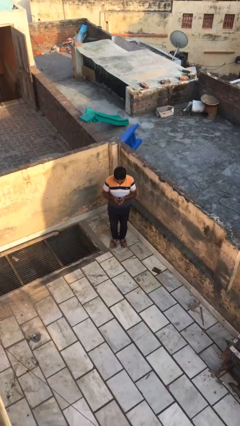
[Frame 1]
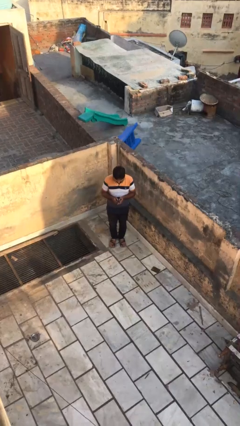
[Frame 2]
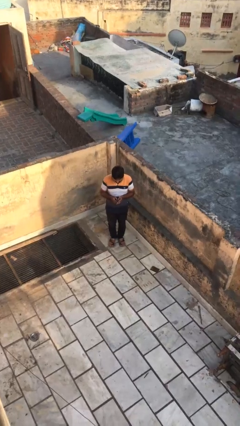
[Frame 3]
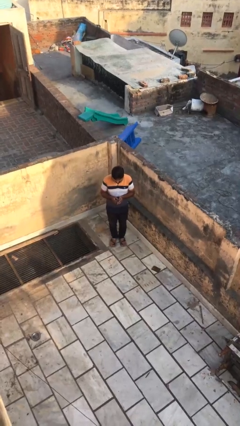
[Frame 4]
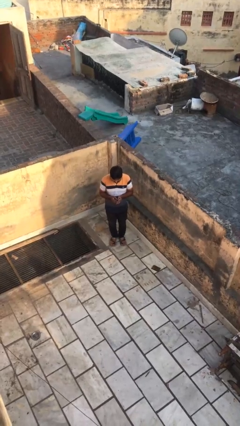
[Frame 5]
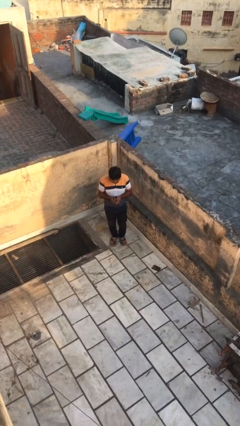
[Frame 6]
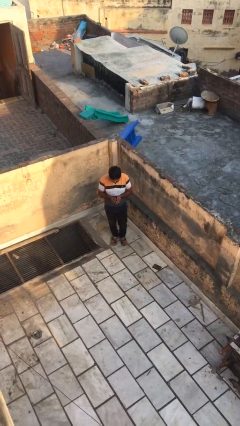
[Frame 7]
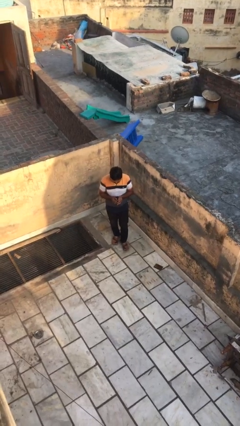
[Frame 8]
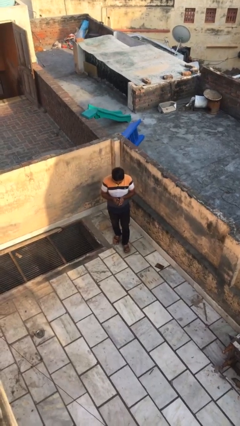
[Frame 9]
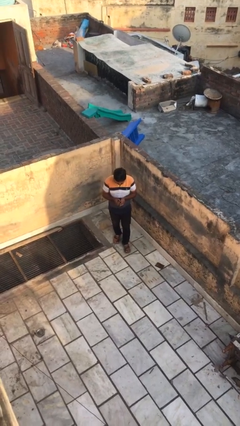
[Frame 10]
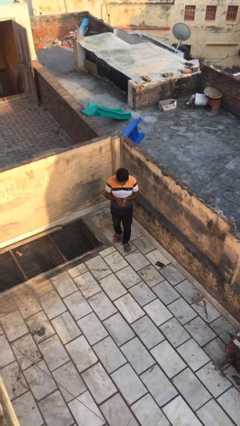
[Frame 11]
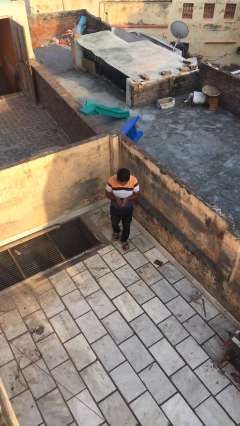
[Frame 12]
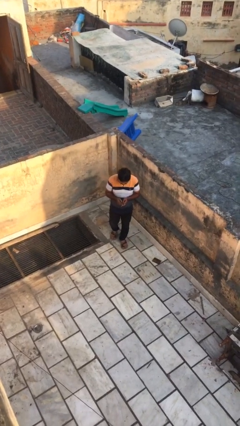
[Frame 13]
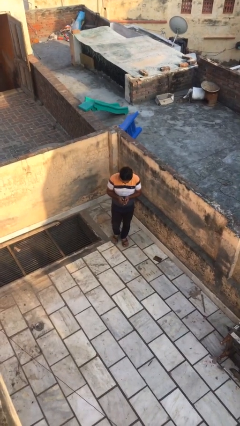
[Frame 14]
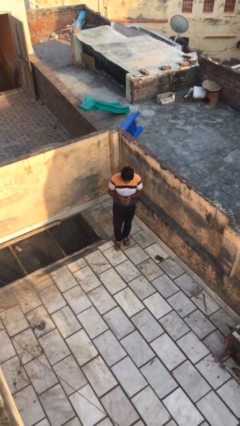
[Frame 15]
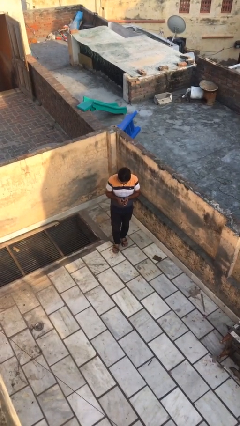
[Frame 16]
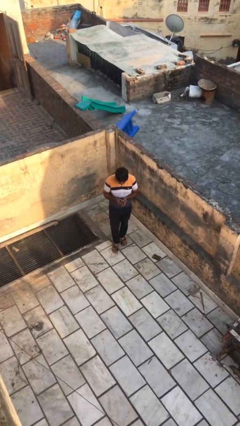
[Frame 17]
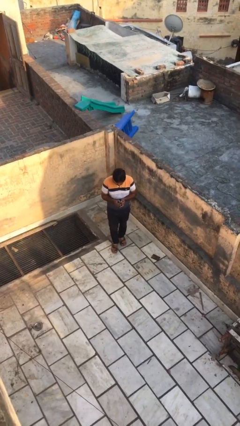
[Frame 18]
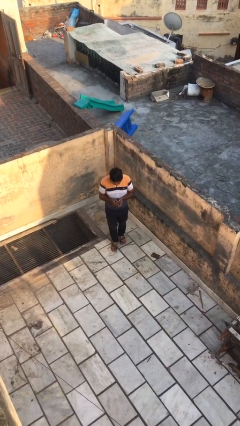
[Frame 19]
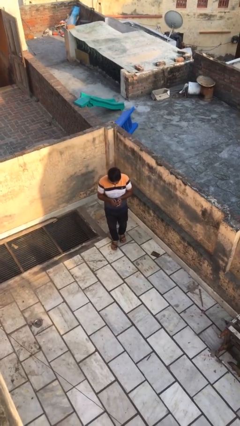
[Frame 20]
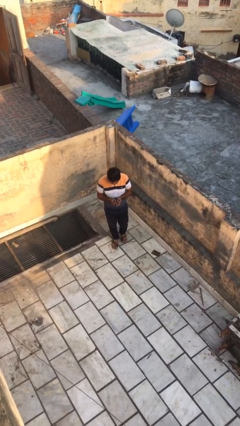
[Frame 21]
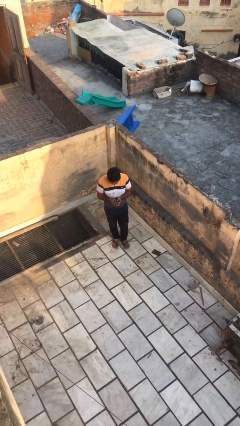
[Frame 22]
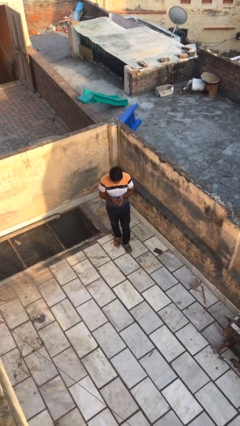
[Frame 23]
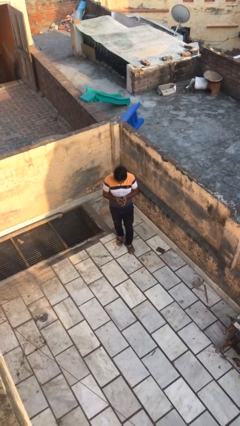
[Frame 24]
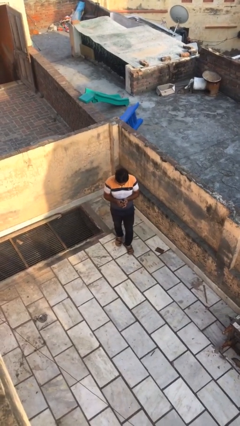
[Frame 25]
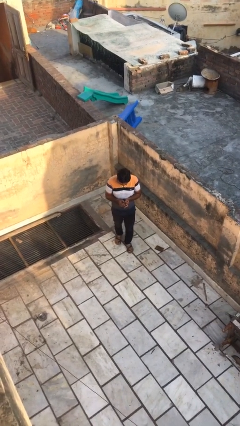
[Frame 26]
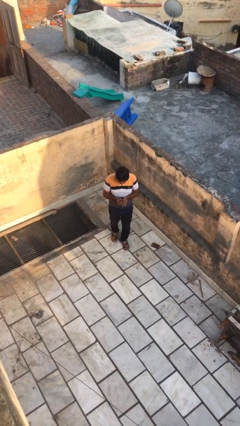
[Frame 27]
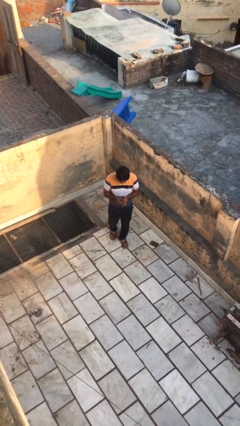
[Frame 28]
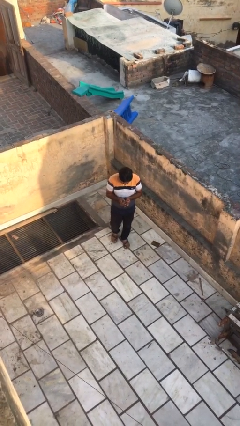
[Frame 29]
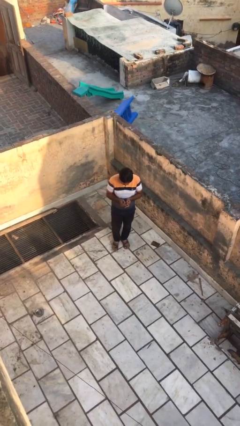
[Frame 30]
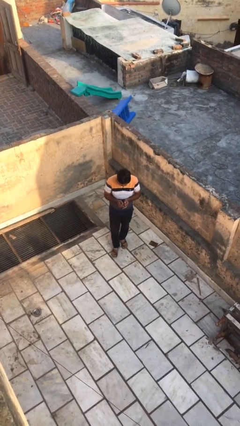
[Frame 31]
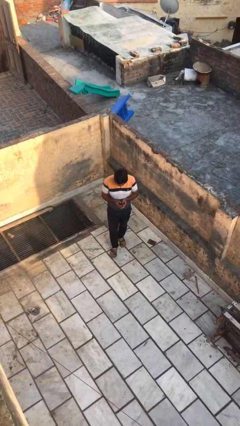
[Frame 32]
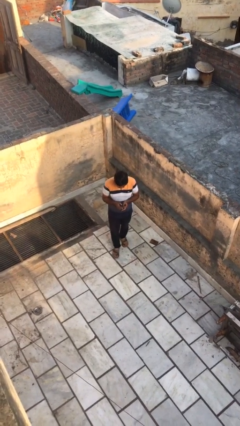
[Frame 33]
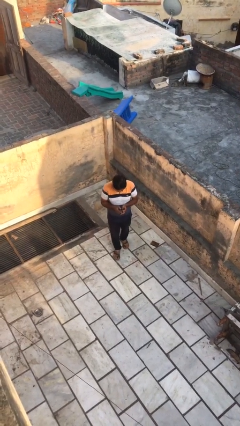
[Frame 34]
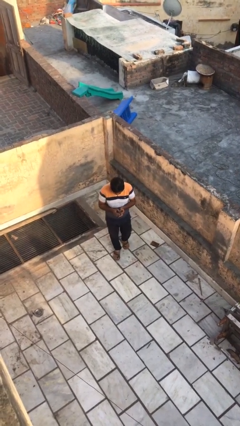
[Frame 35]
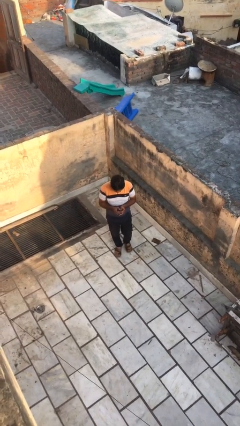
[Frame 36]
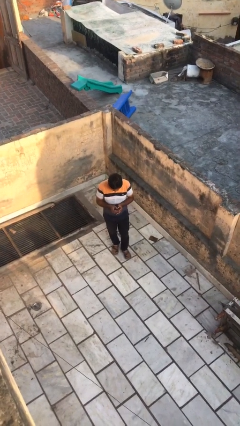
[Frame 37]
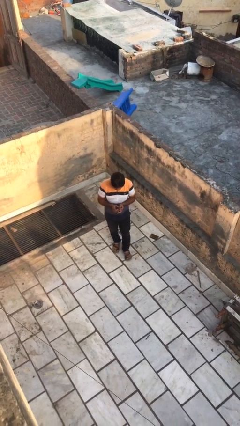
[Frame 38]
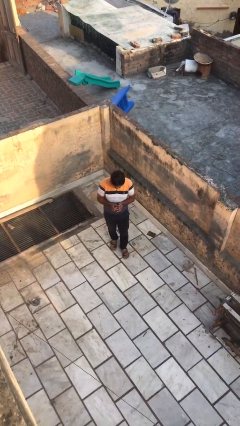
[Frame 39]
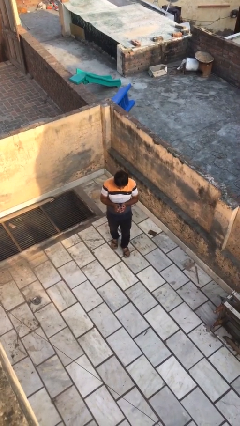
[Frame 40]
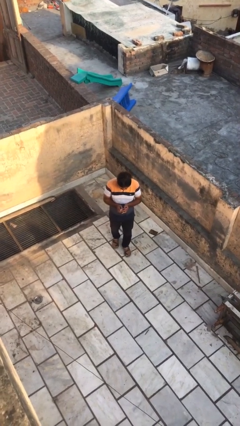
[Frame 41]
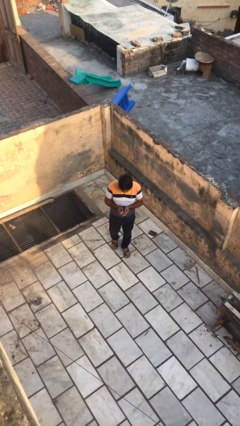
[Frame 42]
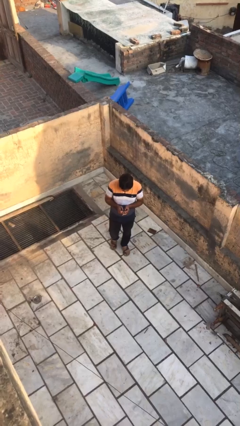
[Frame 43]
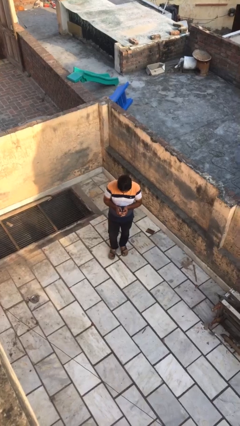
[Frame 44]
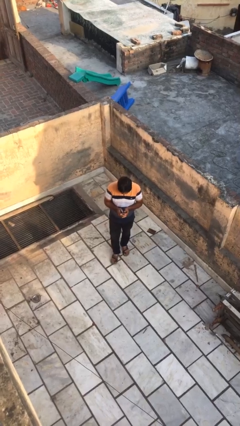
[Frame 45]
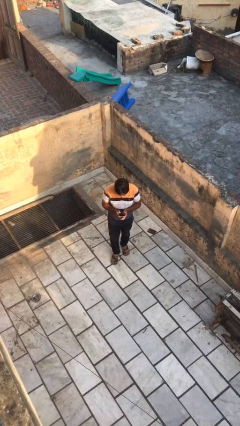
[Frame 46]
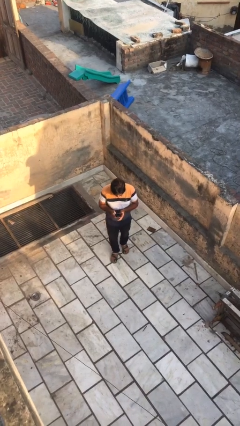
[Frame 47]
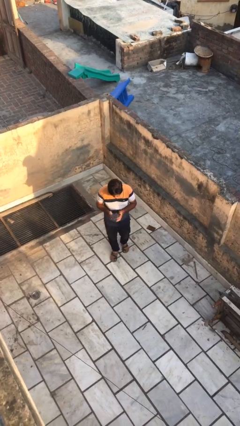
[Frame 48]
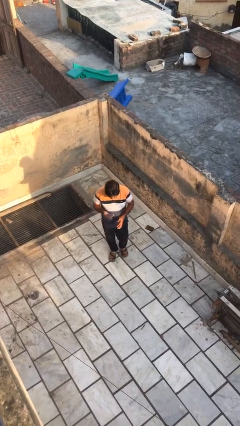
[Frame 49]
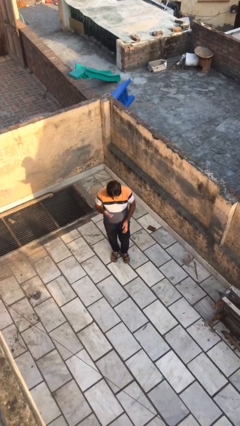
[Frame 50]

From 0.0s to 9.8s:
person texts on phone

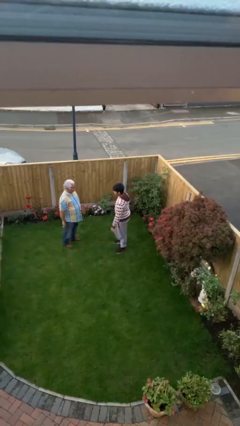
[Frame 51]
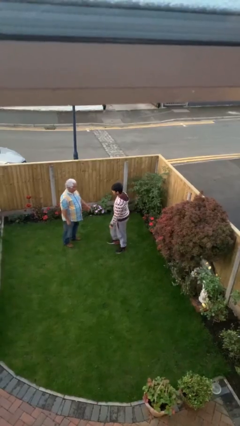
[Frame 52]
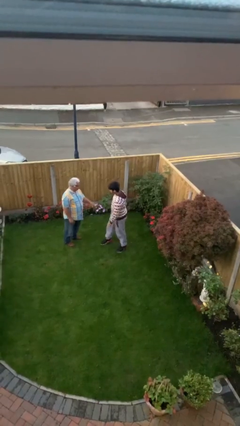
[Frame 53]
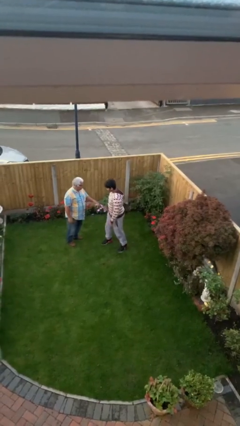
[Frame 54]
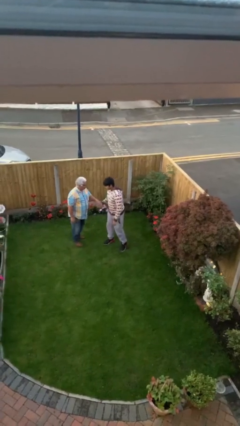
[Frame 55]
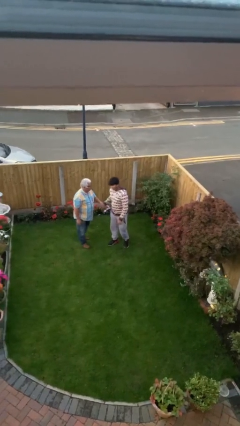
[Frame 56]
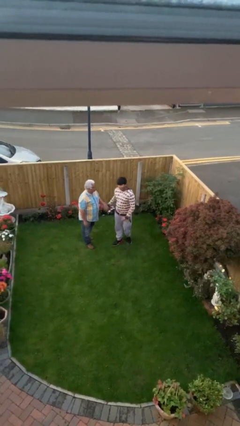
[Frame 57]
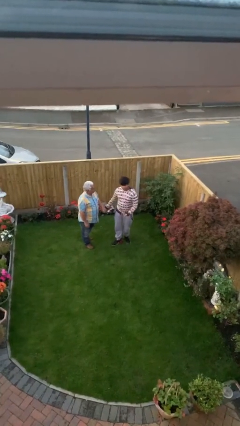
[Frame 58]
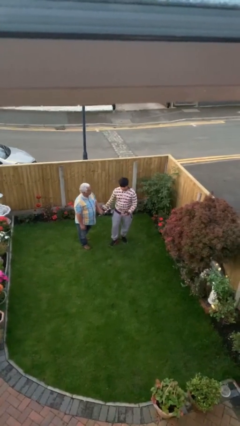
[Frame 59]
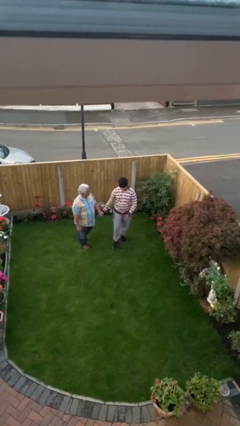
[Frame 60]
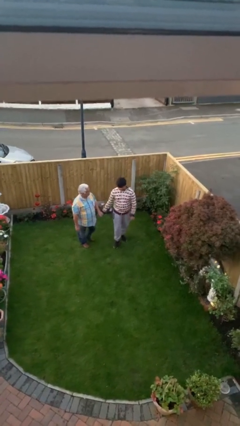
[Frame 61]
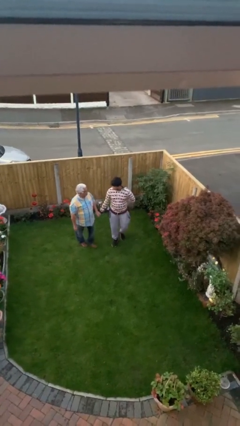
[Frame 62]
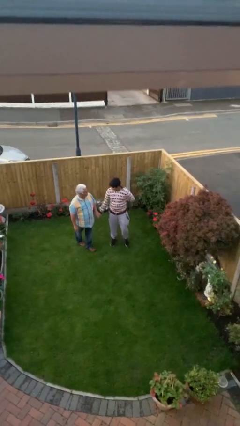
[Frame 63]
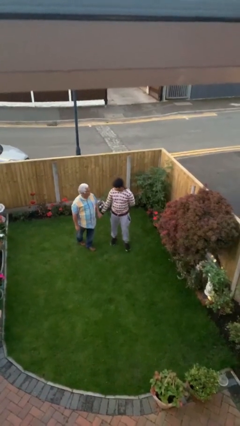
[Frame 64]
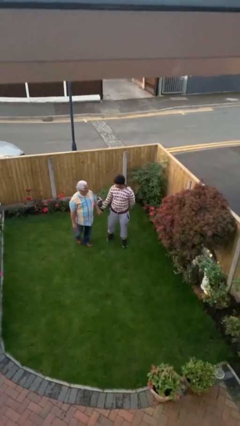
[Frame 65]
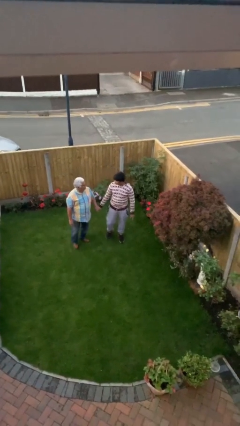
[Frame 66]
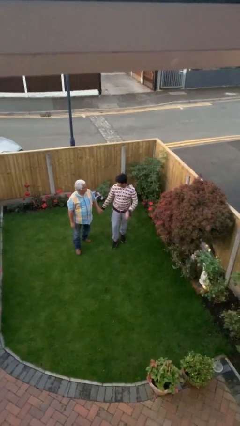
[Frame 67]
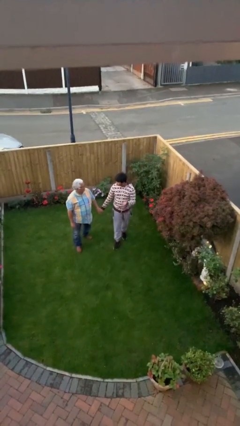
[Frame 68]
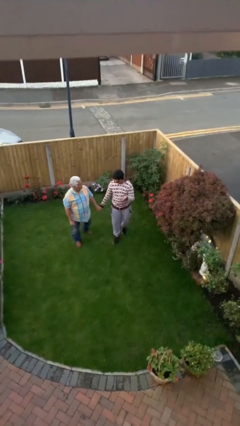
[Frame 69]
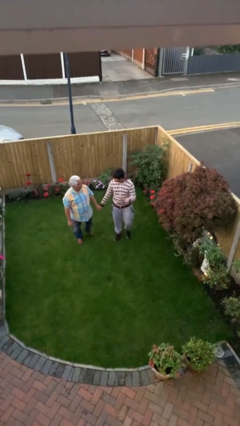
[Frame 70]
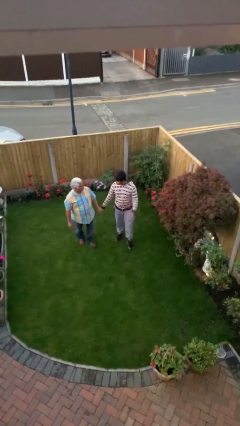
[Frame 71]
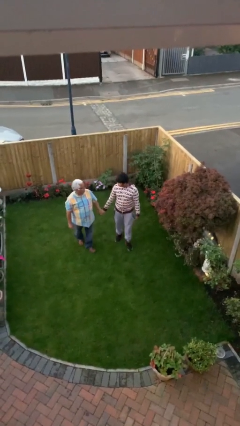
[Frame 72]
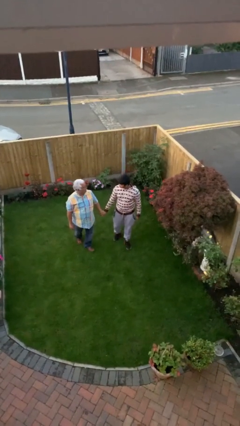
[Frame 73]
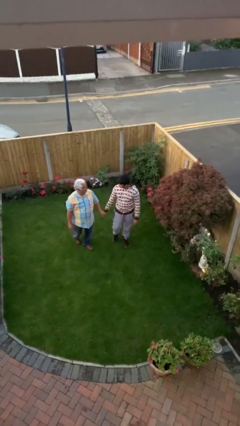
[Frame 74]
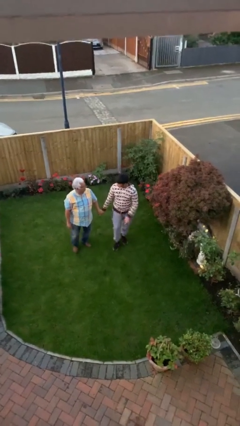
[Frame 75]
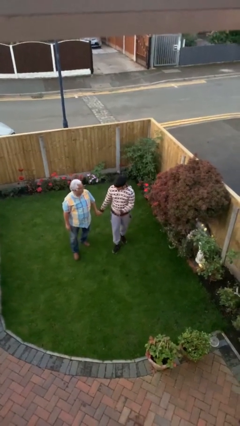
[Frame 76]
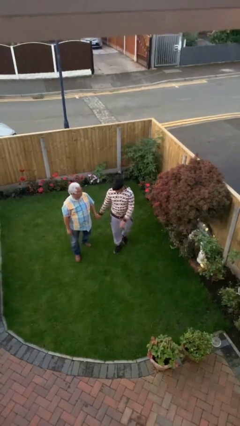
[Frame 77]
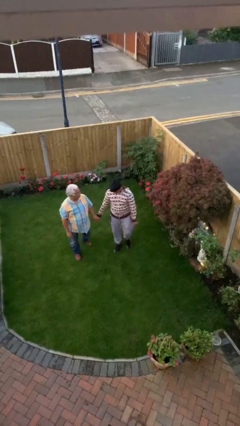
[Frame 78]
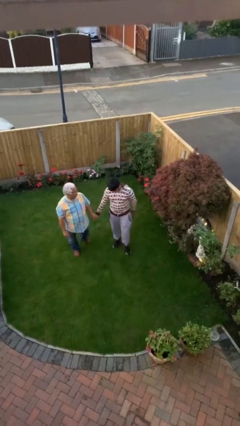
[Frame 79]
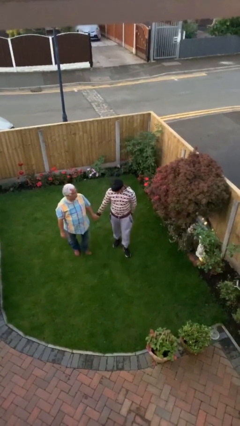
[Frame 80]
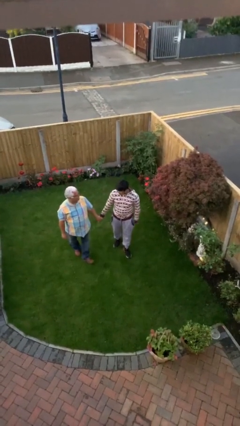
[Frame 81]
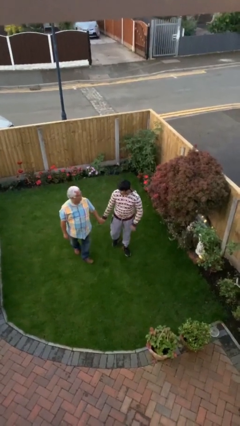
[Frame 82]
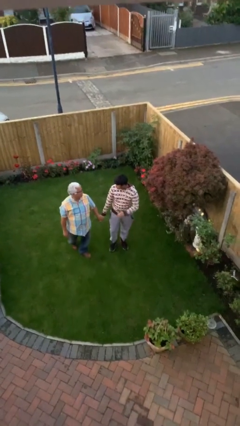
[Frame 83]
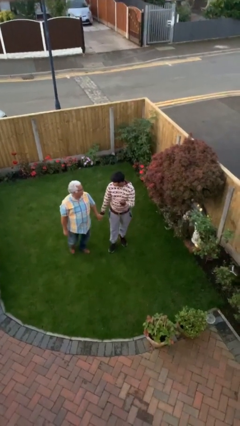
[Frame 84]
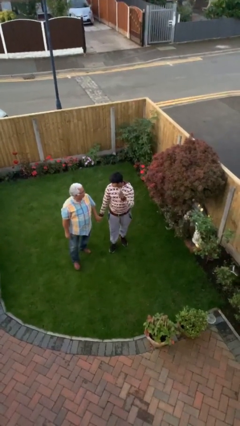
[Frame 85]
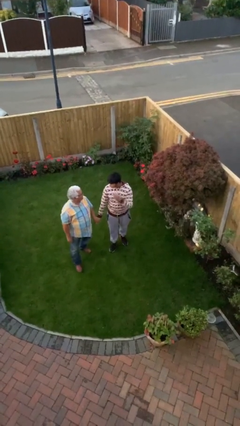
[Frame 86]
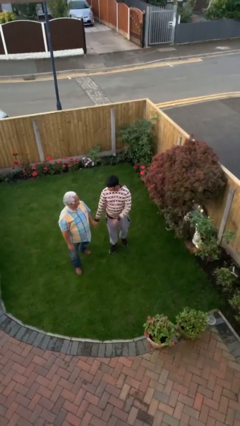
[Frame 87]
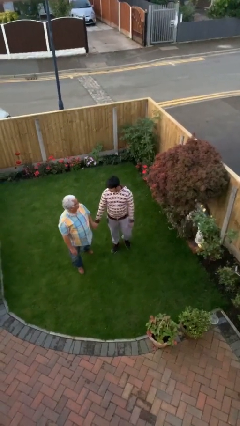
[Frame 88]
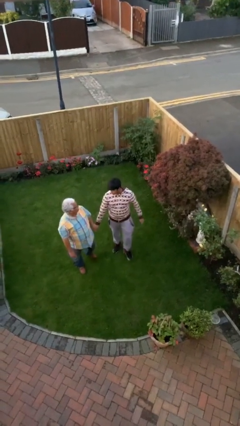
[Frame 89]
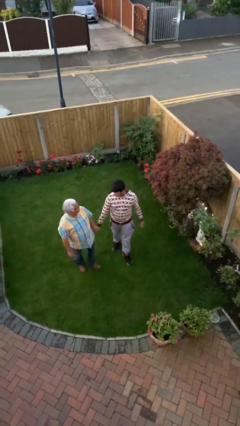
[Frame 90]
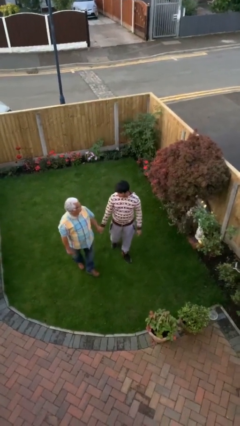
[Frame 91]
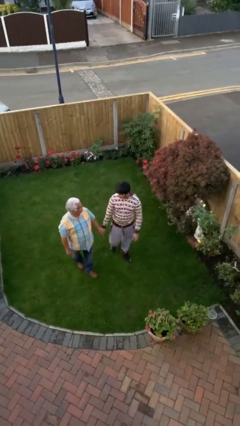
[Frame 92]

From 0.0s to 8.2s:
person holds hand

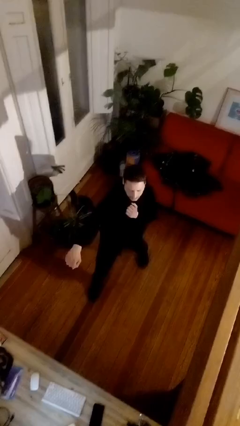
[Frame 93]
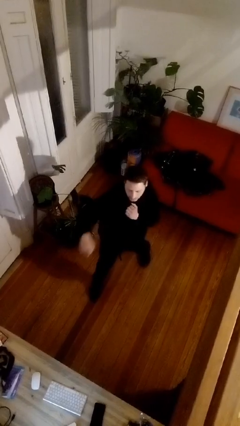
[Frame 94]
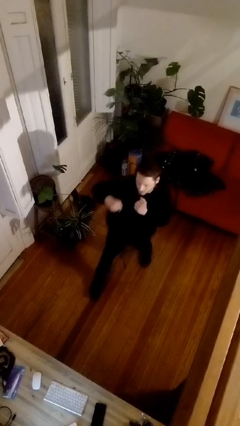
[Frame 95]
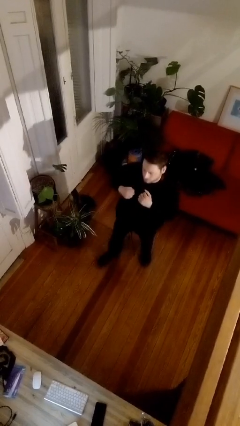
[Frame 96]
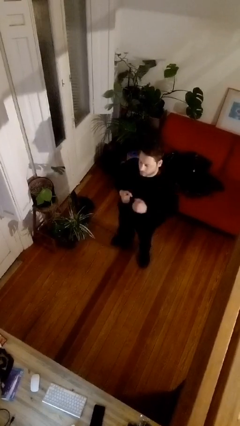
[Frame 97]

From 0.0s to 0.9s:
person punches
